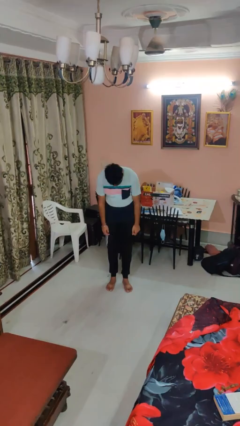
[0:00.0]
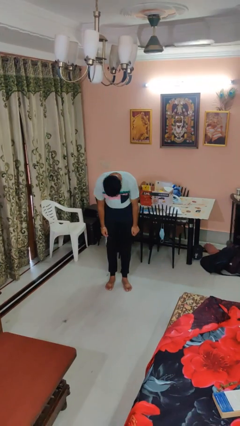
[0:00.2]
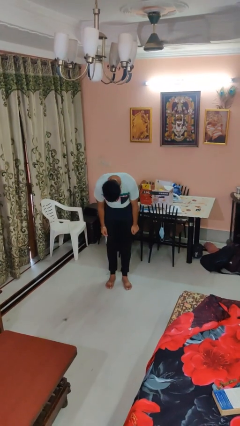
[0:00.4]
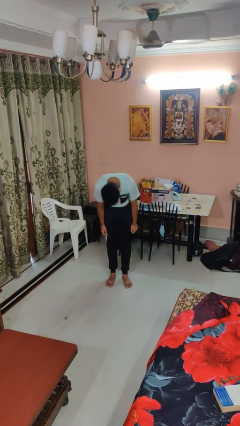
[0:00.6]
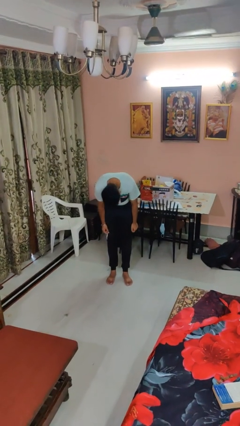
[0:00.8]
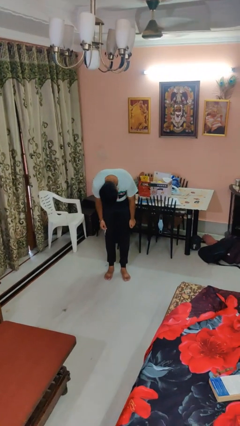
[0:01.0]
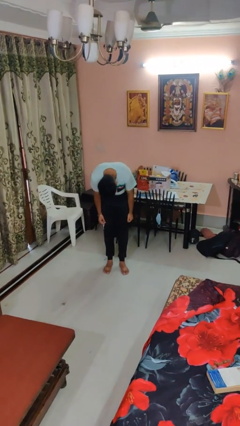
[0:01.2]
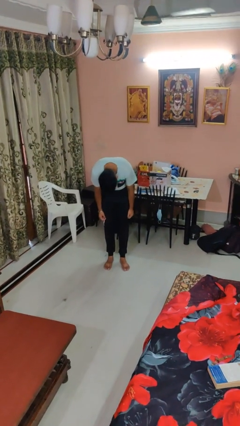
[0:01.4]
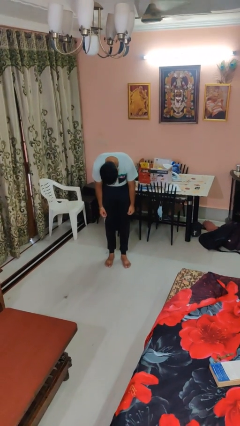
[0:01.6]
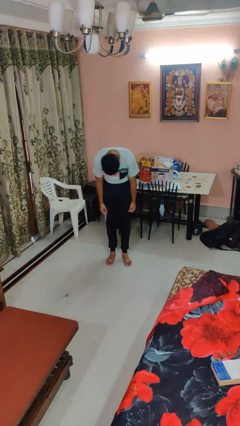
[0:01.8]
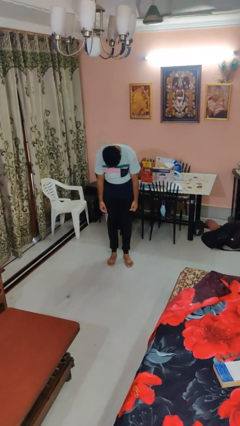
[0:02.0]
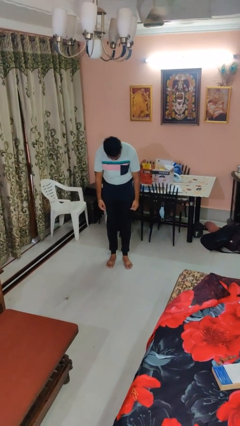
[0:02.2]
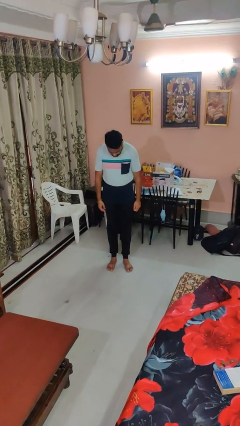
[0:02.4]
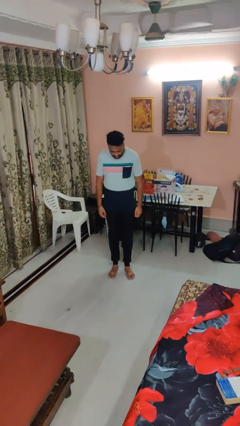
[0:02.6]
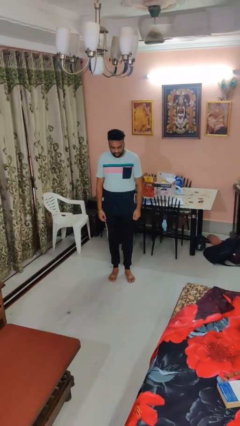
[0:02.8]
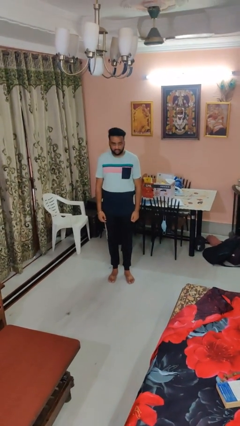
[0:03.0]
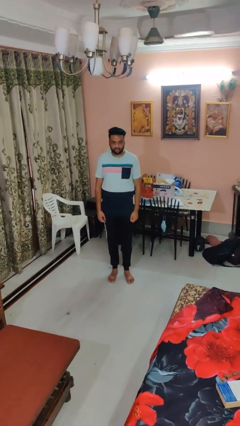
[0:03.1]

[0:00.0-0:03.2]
person bows

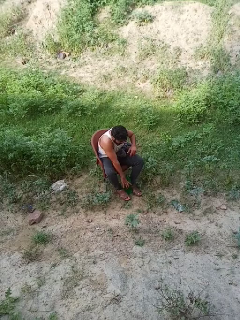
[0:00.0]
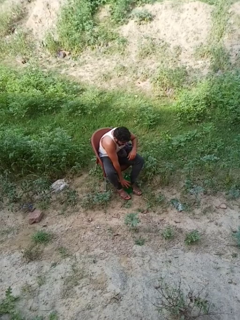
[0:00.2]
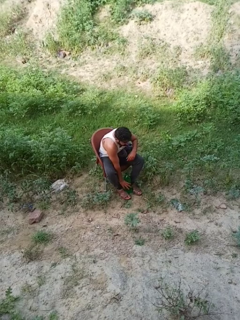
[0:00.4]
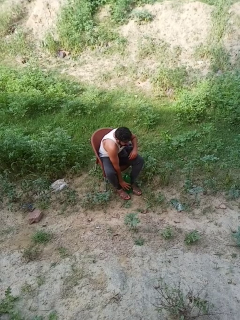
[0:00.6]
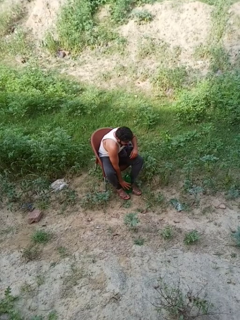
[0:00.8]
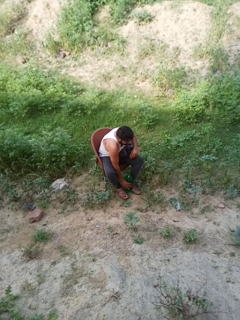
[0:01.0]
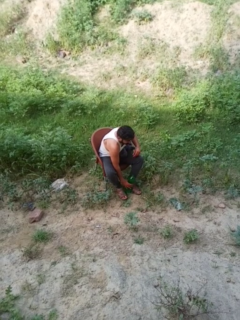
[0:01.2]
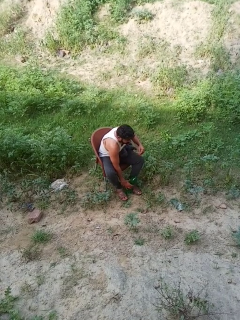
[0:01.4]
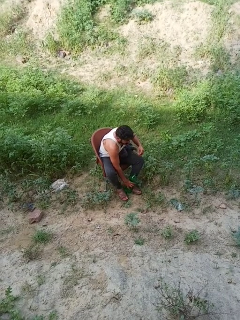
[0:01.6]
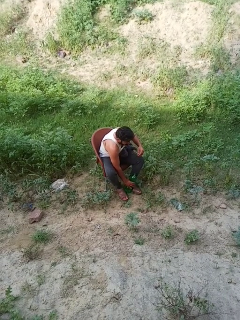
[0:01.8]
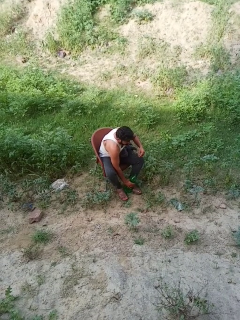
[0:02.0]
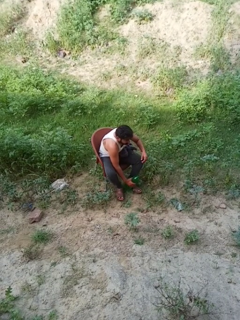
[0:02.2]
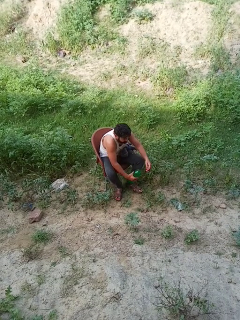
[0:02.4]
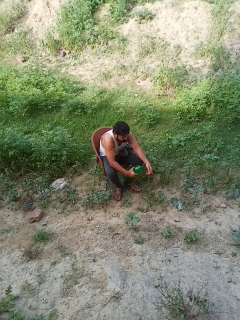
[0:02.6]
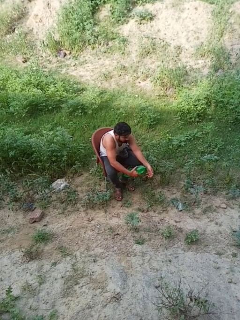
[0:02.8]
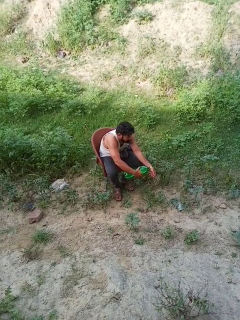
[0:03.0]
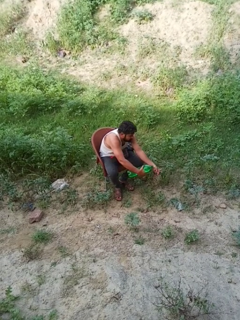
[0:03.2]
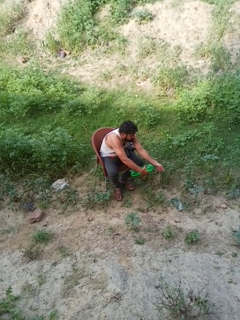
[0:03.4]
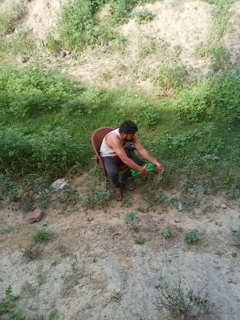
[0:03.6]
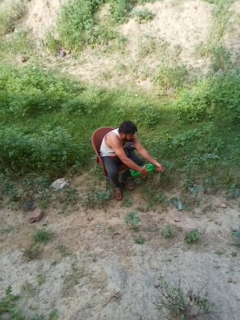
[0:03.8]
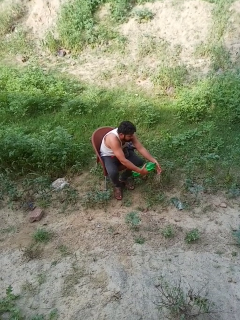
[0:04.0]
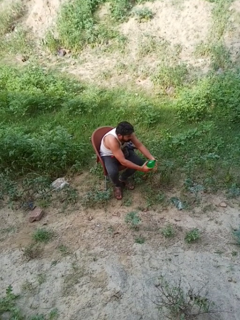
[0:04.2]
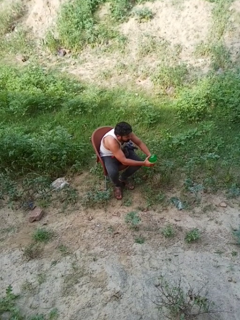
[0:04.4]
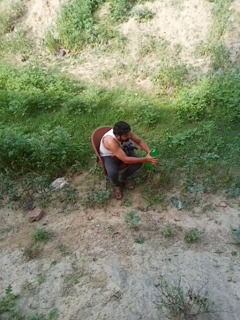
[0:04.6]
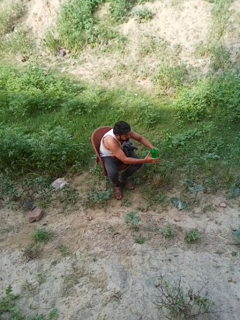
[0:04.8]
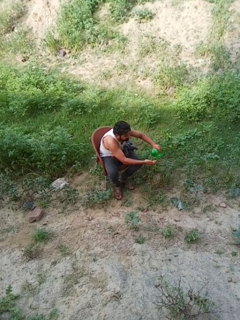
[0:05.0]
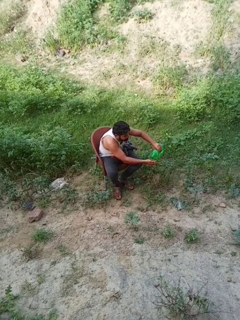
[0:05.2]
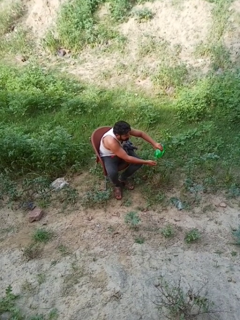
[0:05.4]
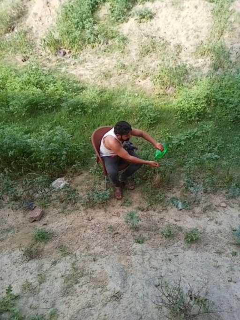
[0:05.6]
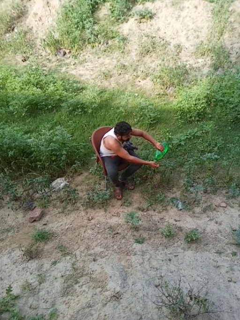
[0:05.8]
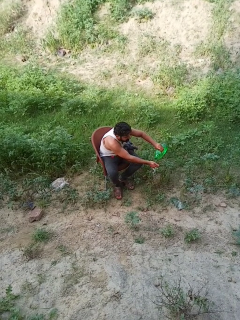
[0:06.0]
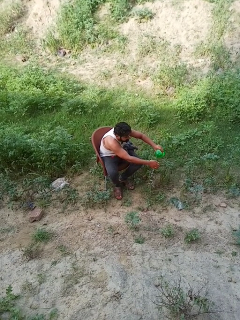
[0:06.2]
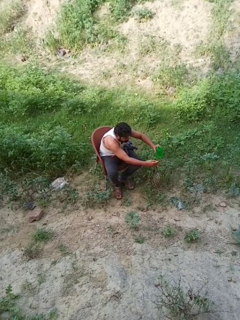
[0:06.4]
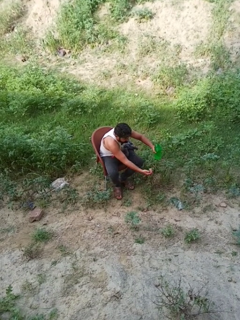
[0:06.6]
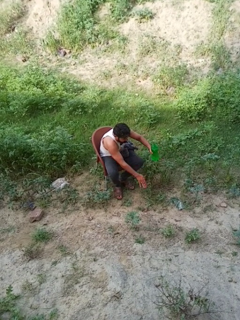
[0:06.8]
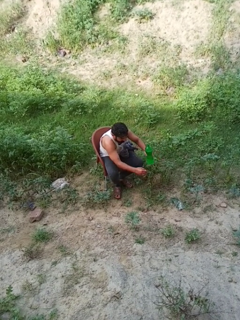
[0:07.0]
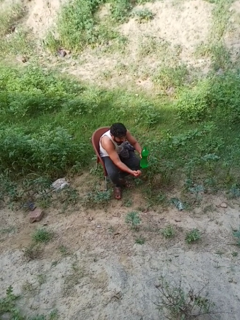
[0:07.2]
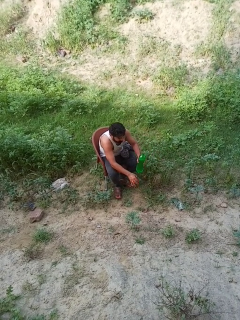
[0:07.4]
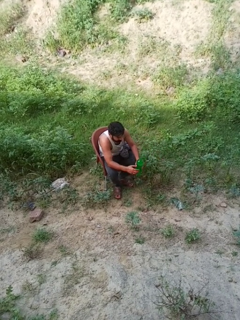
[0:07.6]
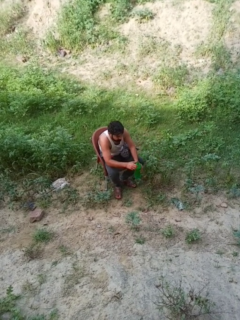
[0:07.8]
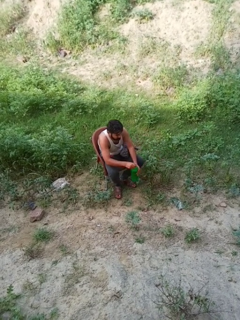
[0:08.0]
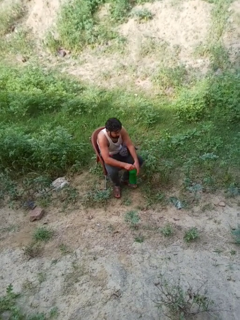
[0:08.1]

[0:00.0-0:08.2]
person washes hands

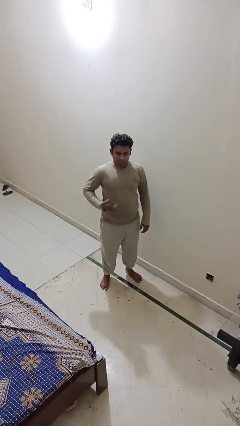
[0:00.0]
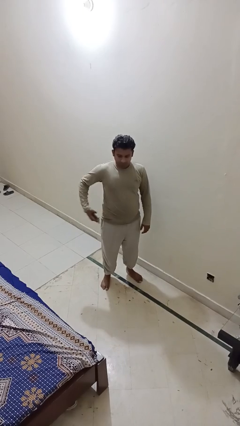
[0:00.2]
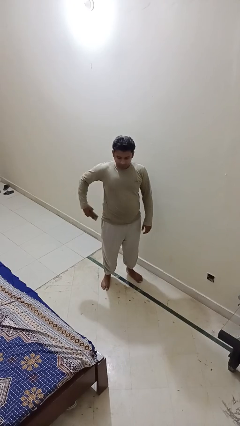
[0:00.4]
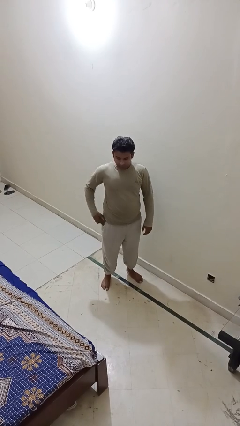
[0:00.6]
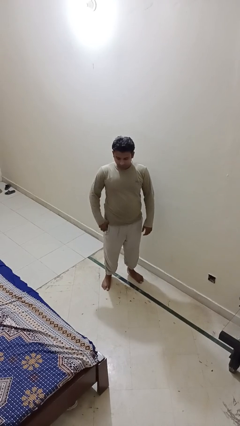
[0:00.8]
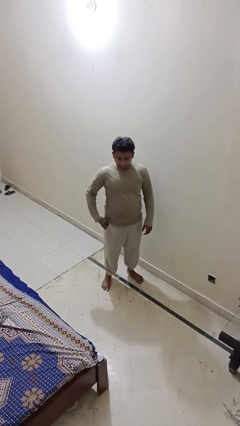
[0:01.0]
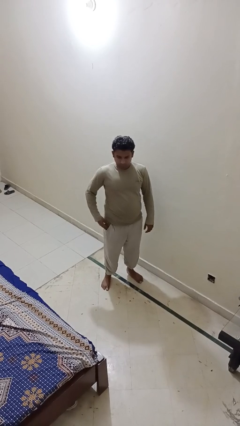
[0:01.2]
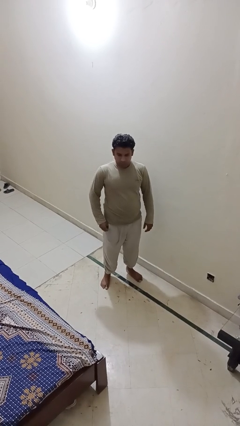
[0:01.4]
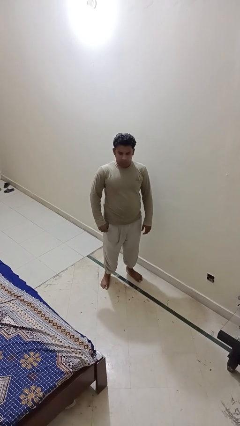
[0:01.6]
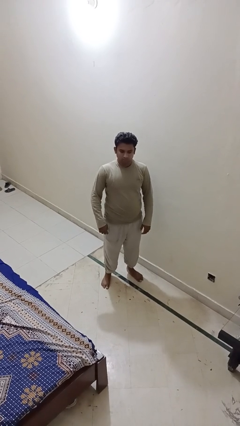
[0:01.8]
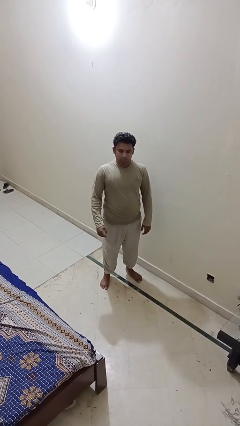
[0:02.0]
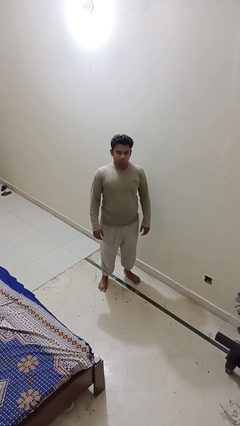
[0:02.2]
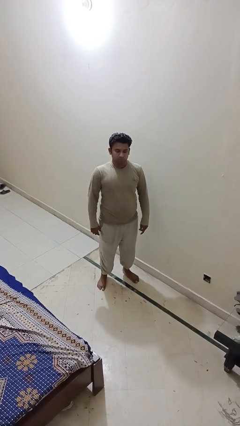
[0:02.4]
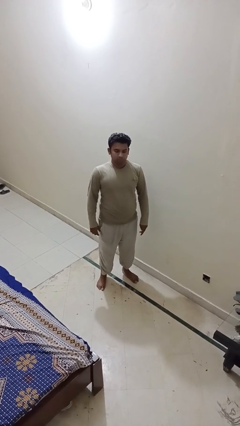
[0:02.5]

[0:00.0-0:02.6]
person puts phone into pocket

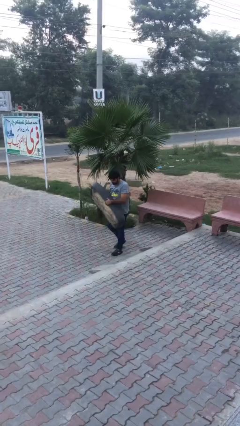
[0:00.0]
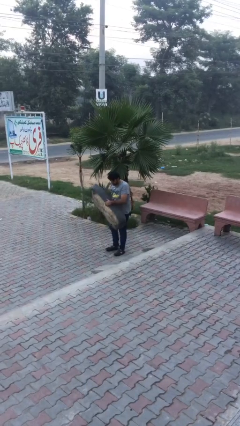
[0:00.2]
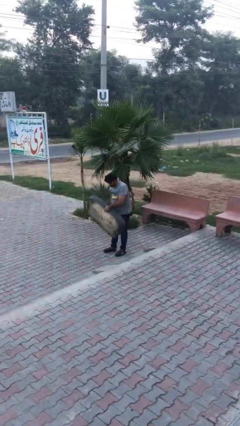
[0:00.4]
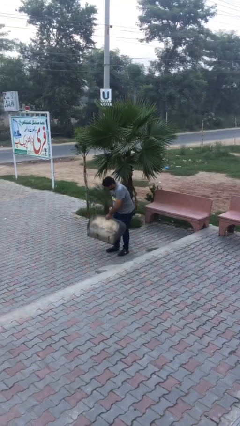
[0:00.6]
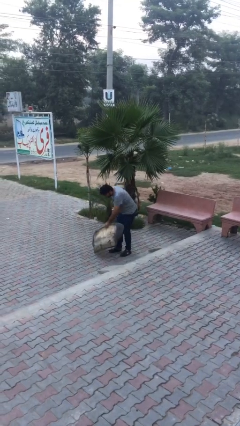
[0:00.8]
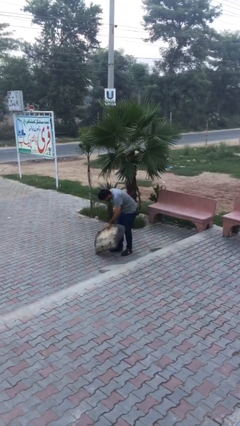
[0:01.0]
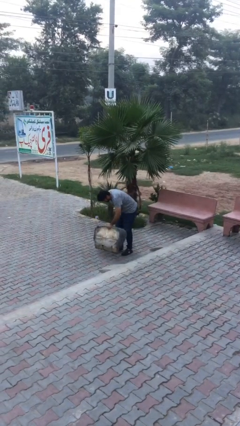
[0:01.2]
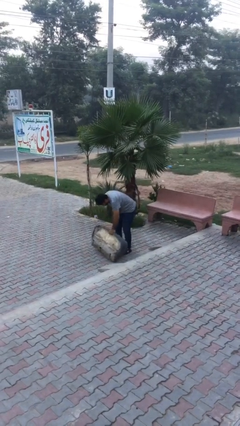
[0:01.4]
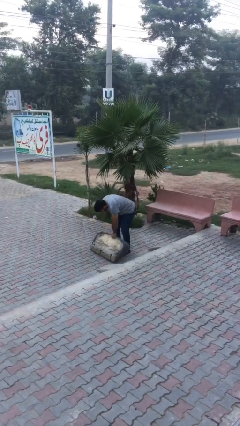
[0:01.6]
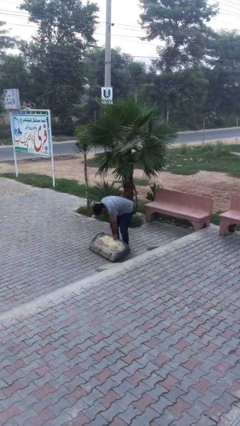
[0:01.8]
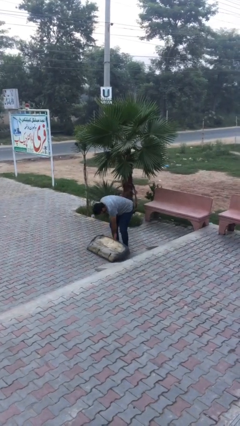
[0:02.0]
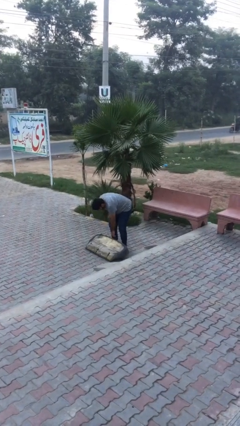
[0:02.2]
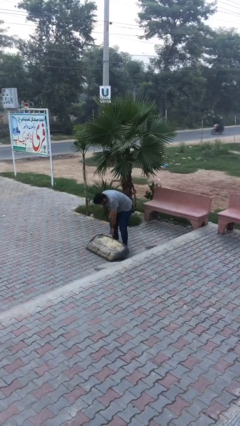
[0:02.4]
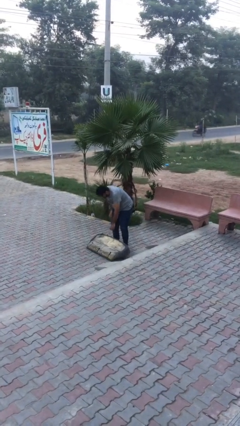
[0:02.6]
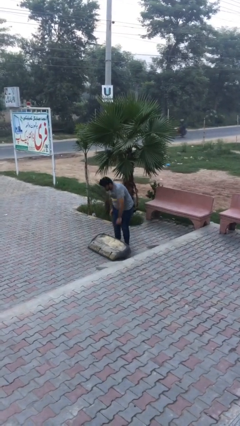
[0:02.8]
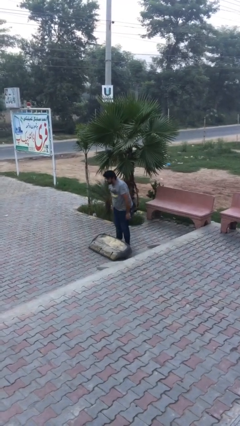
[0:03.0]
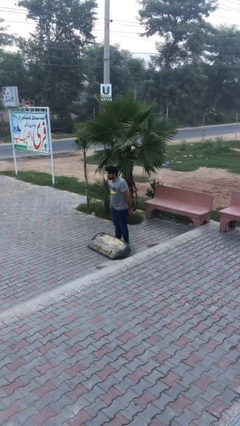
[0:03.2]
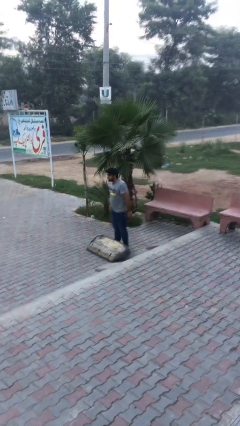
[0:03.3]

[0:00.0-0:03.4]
person puts down object on floor

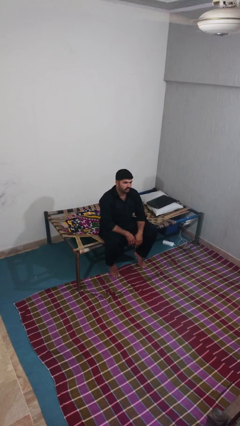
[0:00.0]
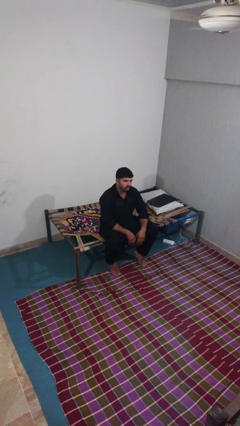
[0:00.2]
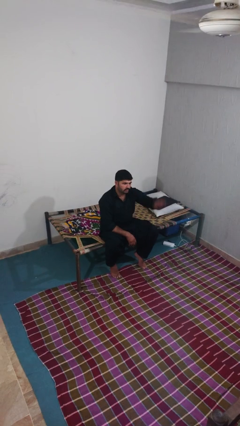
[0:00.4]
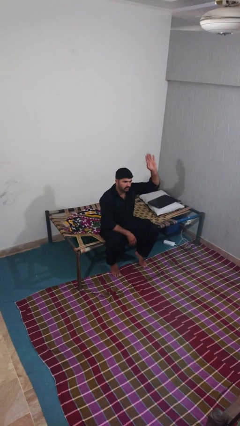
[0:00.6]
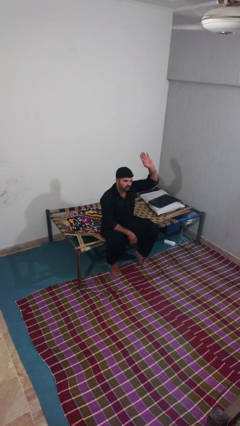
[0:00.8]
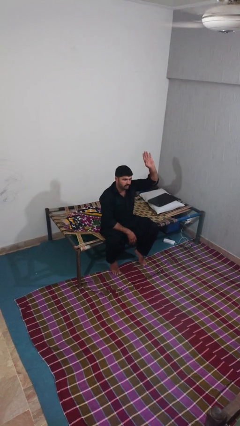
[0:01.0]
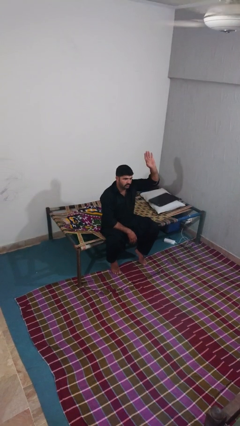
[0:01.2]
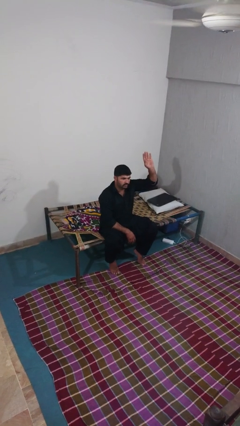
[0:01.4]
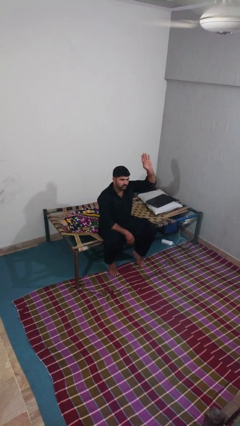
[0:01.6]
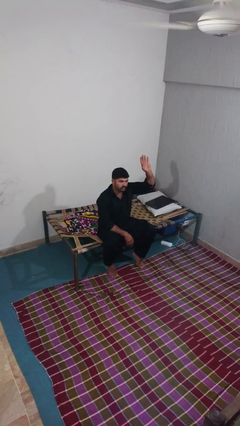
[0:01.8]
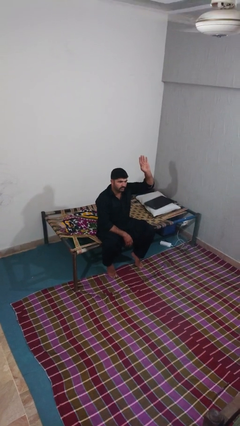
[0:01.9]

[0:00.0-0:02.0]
person gestures raise hand
